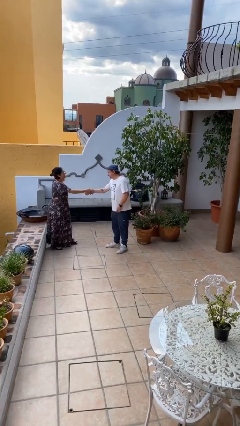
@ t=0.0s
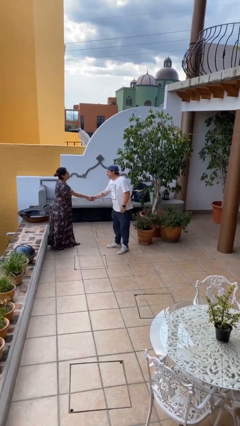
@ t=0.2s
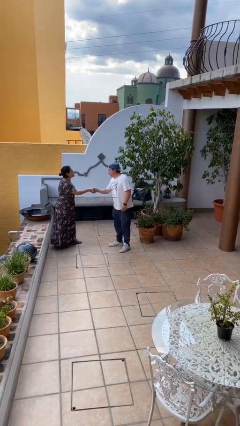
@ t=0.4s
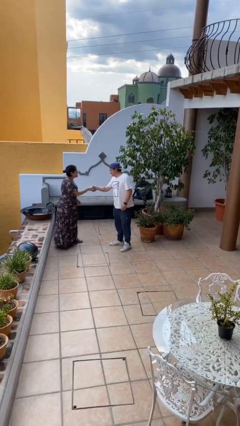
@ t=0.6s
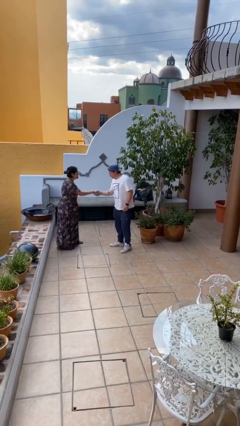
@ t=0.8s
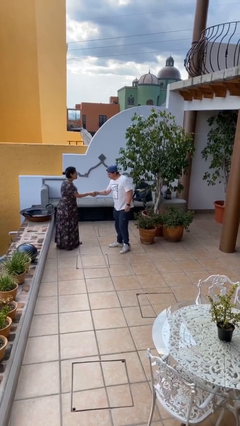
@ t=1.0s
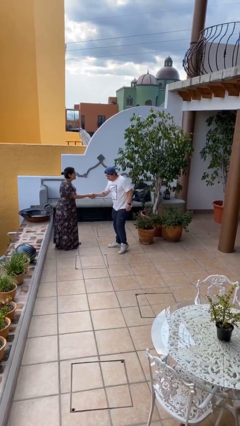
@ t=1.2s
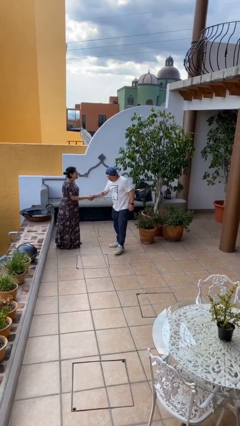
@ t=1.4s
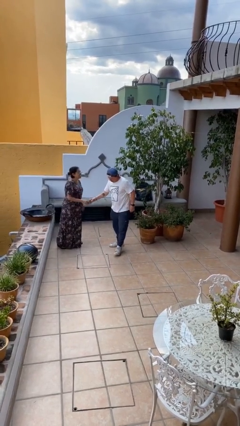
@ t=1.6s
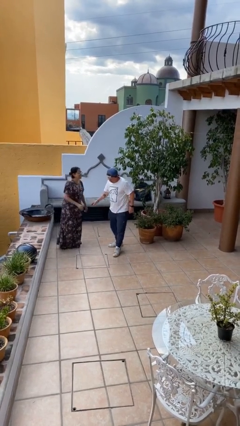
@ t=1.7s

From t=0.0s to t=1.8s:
person shakes hand

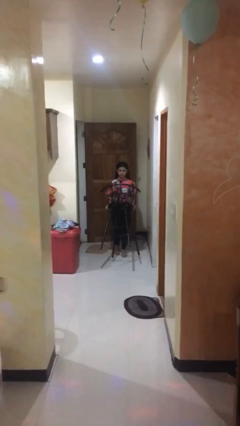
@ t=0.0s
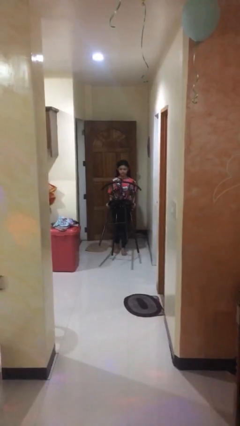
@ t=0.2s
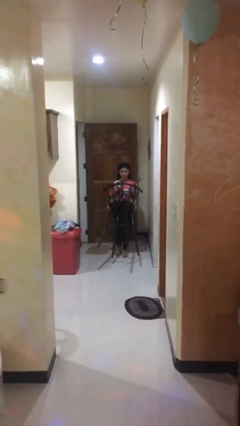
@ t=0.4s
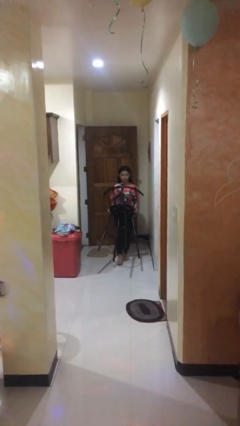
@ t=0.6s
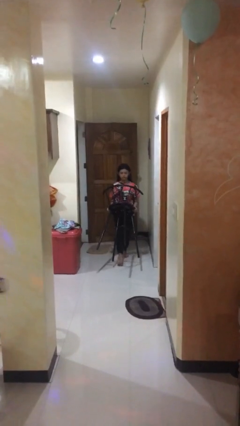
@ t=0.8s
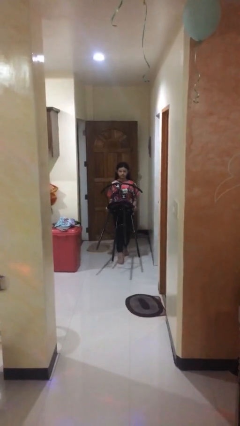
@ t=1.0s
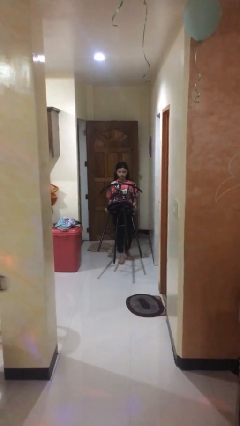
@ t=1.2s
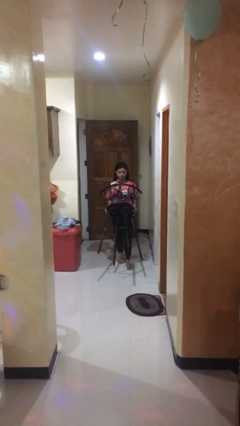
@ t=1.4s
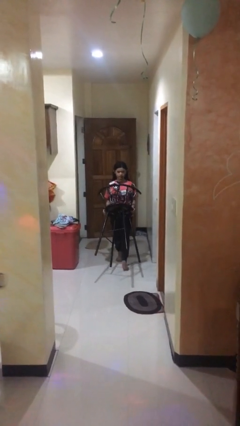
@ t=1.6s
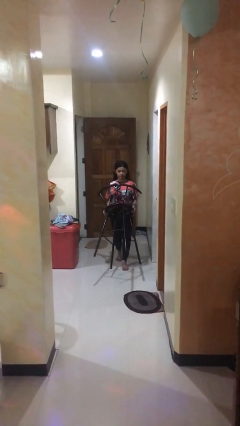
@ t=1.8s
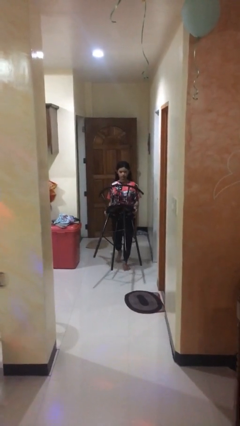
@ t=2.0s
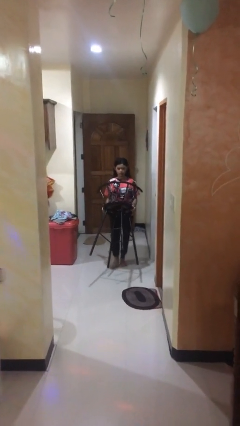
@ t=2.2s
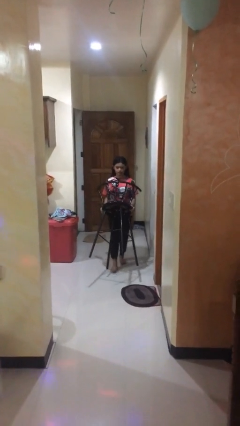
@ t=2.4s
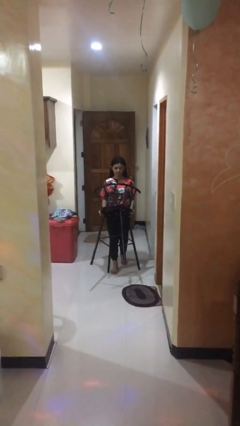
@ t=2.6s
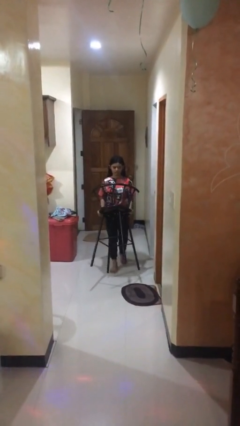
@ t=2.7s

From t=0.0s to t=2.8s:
person carries heavy object

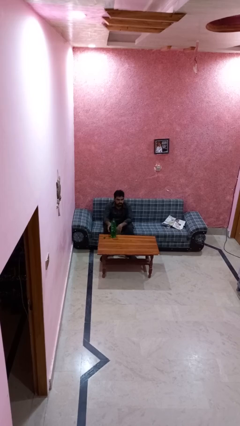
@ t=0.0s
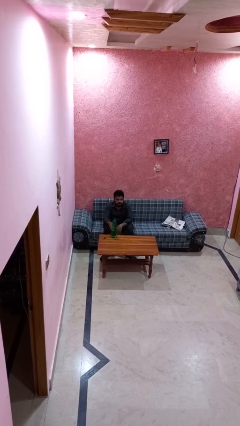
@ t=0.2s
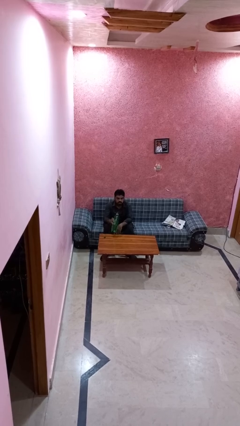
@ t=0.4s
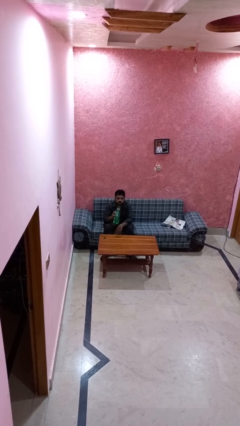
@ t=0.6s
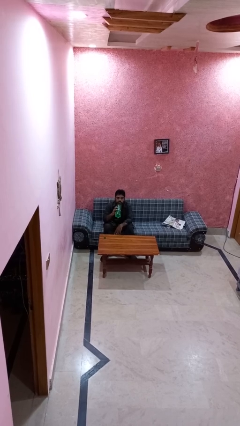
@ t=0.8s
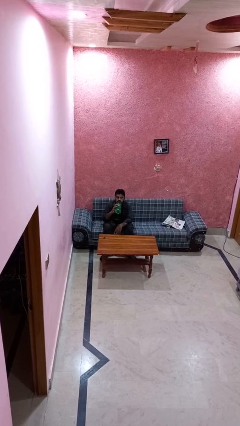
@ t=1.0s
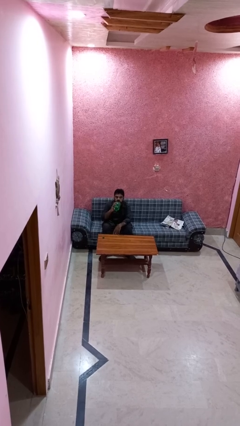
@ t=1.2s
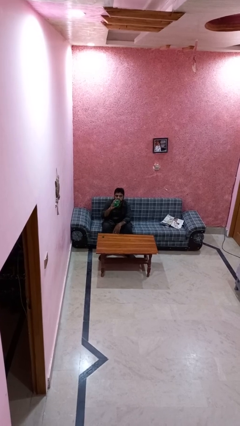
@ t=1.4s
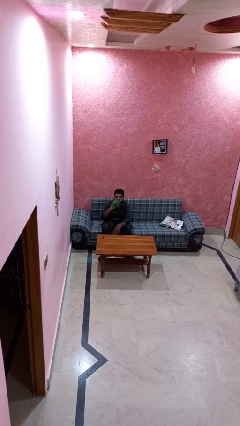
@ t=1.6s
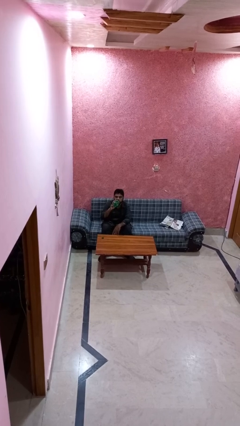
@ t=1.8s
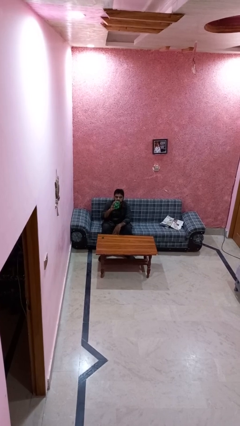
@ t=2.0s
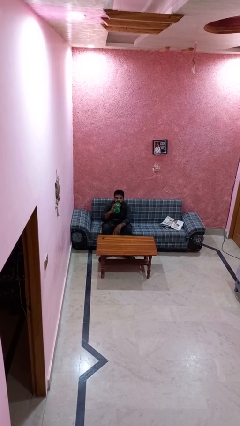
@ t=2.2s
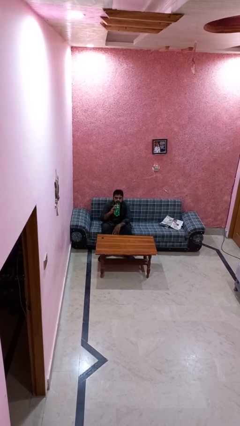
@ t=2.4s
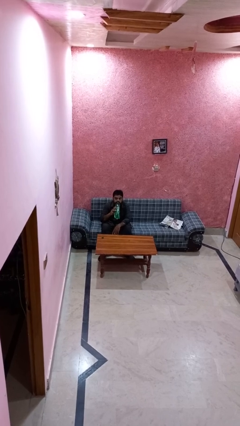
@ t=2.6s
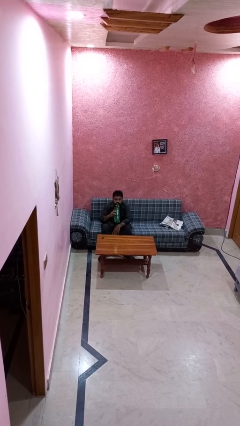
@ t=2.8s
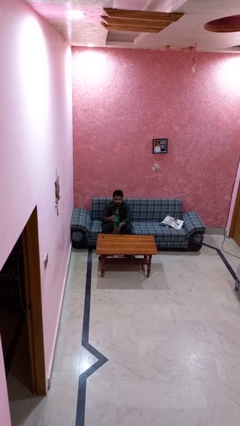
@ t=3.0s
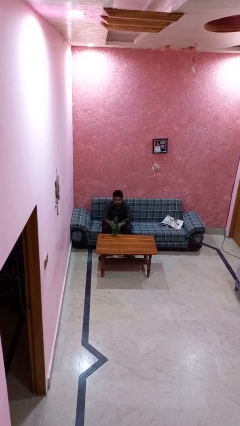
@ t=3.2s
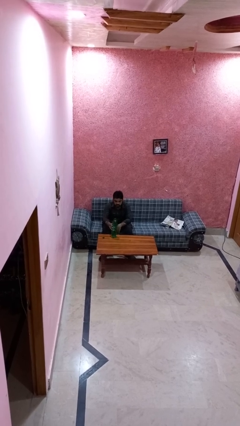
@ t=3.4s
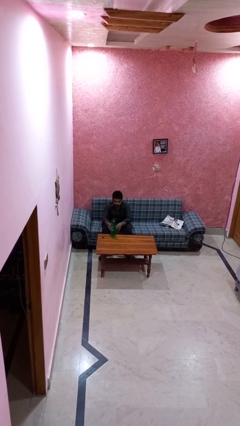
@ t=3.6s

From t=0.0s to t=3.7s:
person drinks from bottle

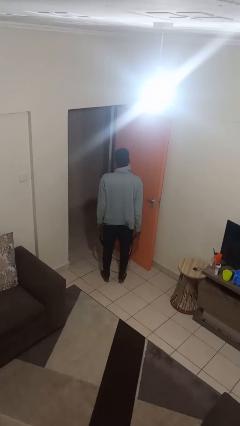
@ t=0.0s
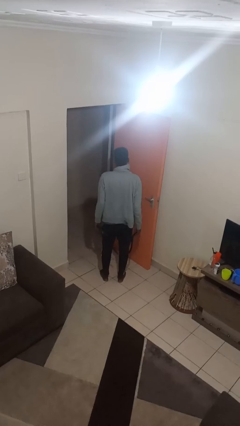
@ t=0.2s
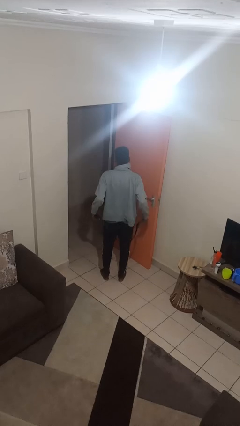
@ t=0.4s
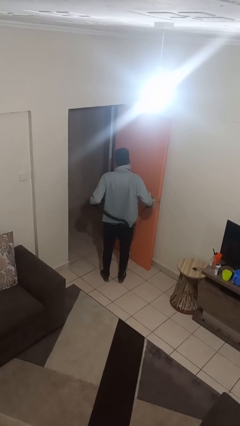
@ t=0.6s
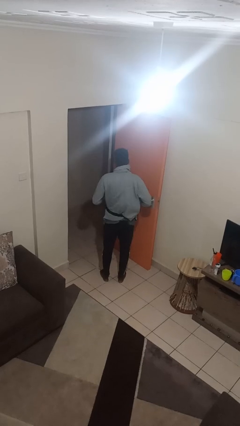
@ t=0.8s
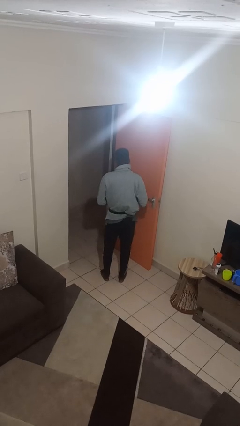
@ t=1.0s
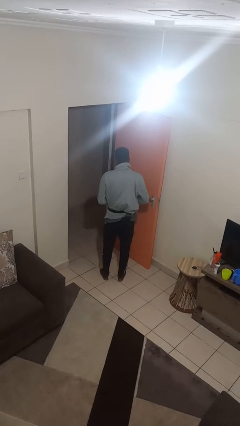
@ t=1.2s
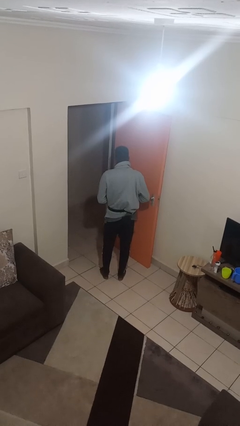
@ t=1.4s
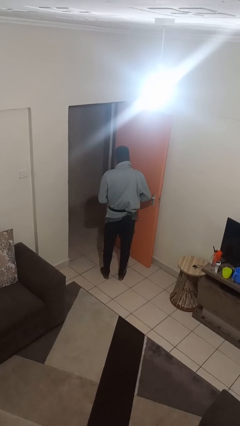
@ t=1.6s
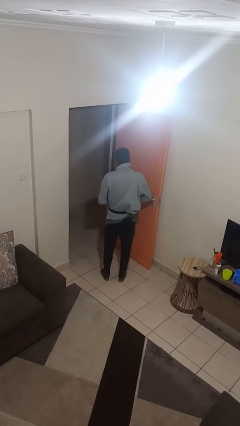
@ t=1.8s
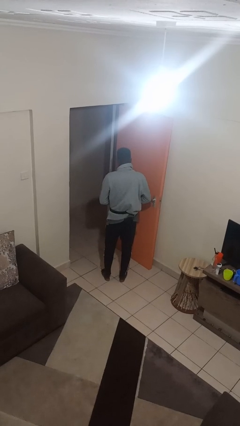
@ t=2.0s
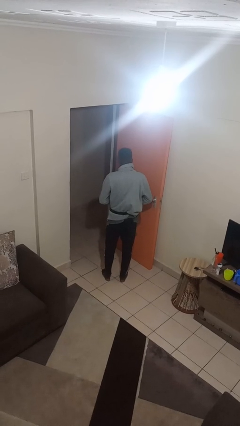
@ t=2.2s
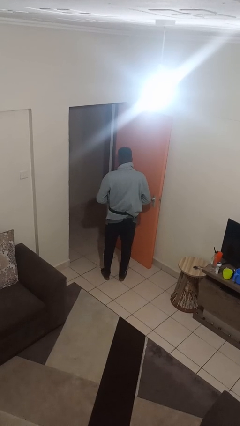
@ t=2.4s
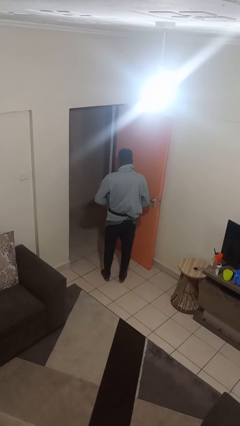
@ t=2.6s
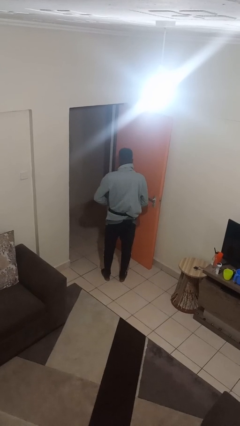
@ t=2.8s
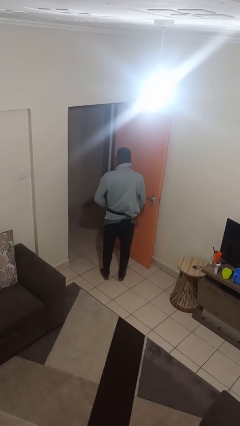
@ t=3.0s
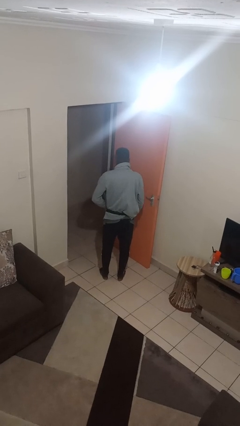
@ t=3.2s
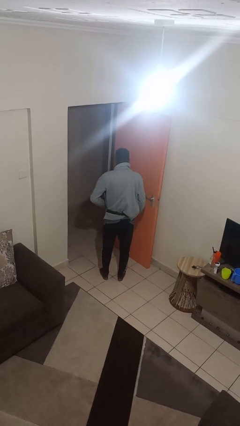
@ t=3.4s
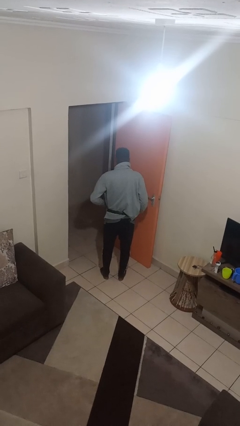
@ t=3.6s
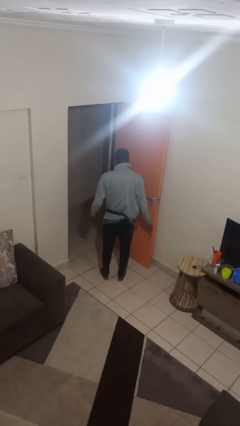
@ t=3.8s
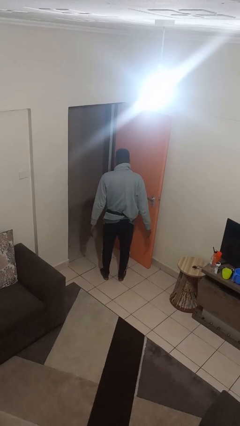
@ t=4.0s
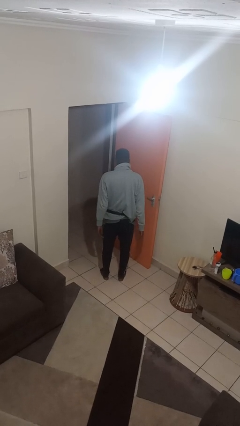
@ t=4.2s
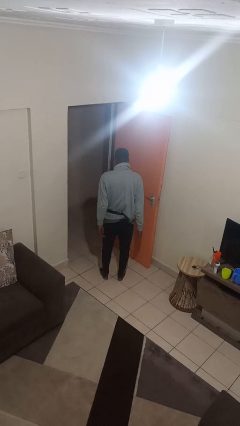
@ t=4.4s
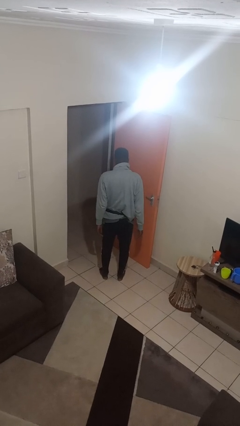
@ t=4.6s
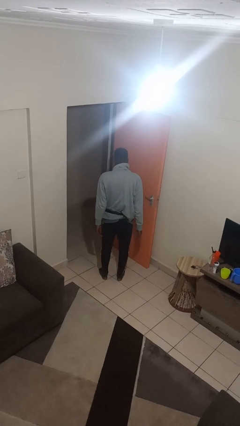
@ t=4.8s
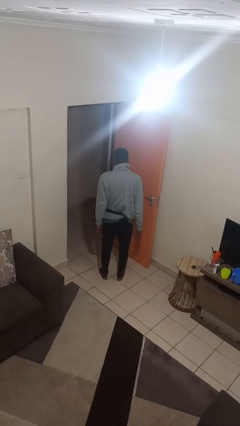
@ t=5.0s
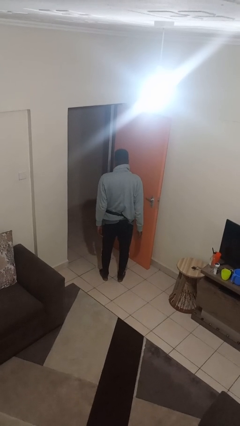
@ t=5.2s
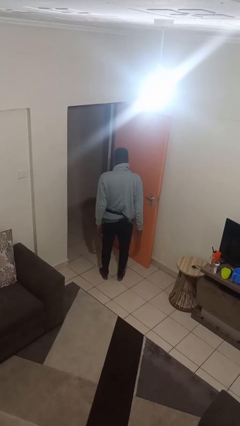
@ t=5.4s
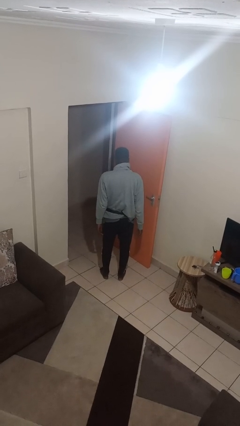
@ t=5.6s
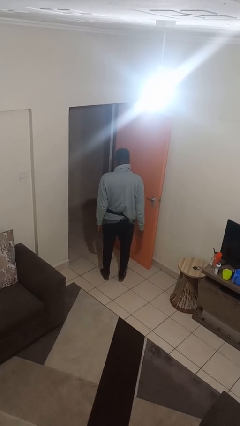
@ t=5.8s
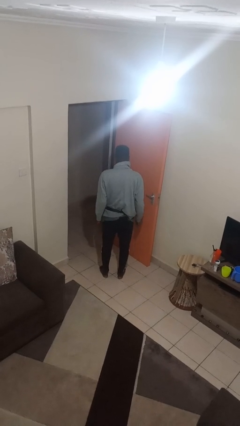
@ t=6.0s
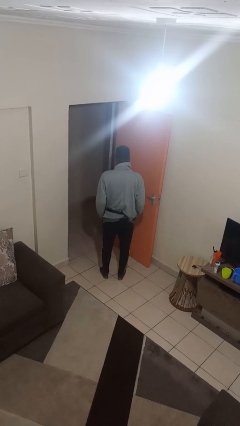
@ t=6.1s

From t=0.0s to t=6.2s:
person puts on belt

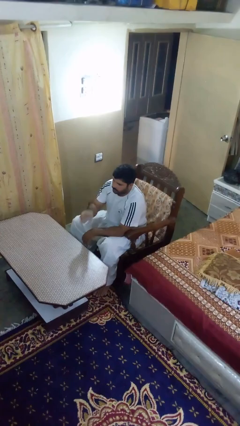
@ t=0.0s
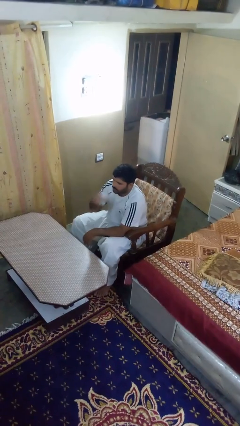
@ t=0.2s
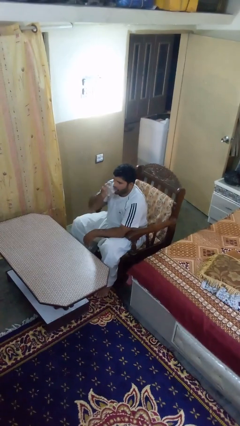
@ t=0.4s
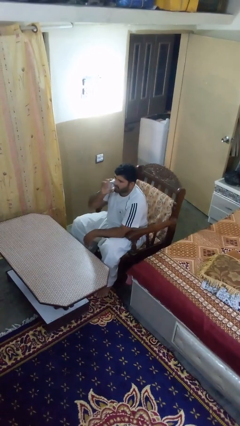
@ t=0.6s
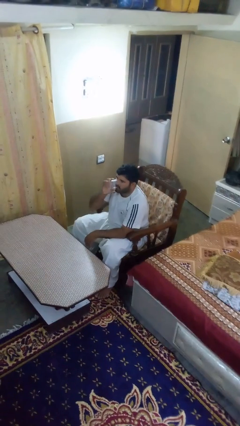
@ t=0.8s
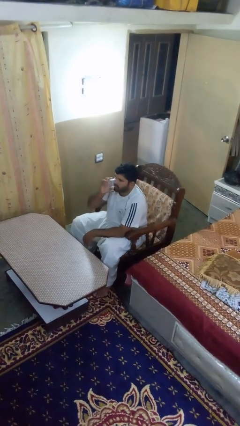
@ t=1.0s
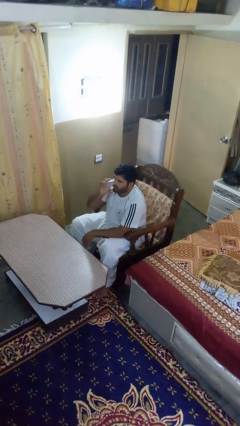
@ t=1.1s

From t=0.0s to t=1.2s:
person drinks from shotglass

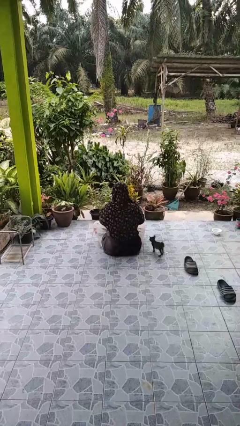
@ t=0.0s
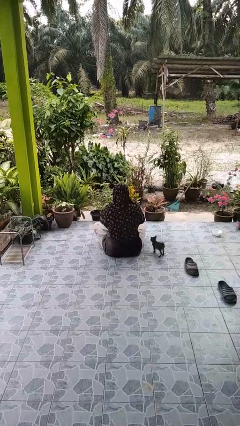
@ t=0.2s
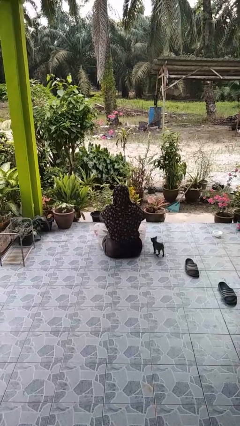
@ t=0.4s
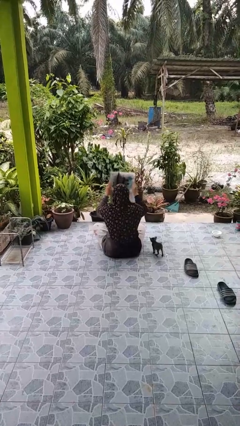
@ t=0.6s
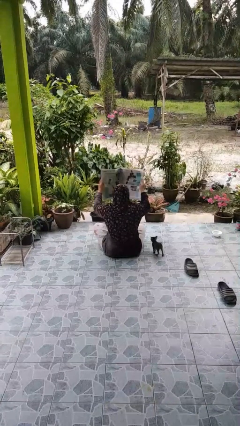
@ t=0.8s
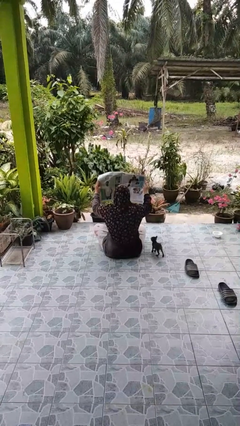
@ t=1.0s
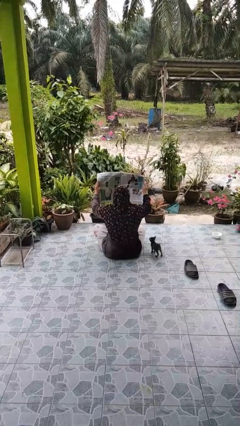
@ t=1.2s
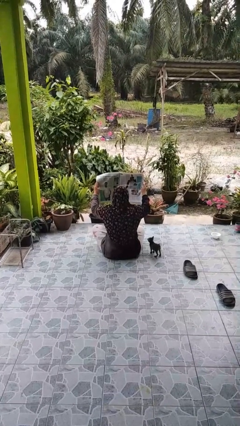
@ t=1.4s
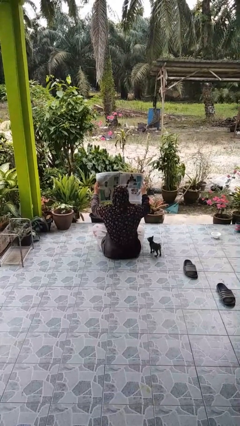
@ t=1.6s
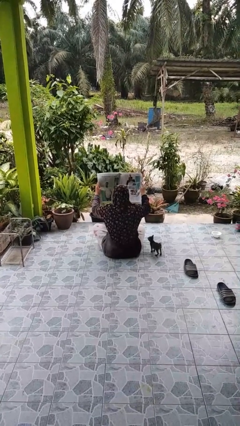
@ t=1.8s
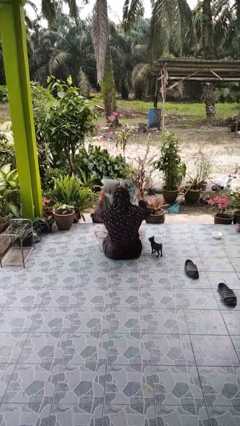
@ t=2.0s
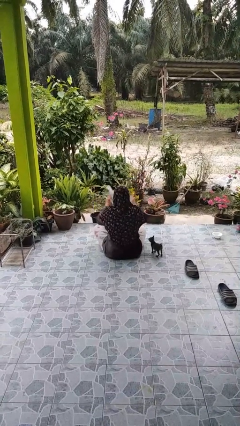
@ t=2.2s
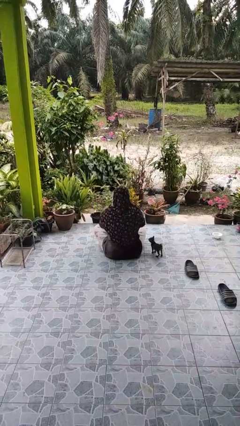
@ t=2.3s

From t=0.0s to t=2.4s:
person reads newspaper
